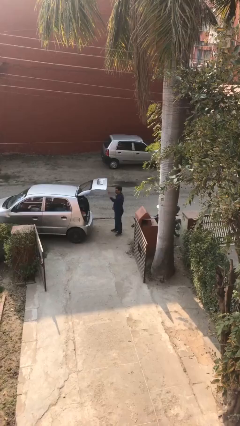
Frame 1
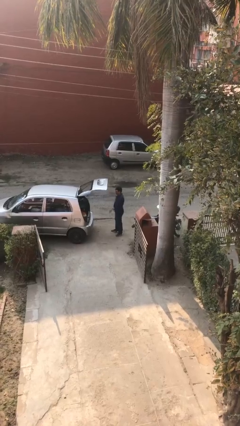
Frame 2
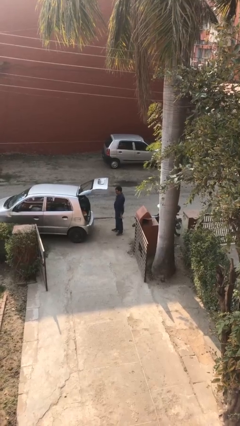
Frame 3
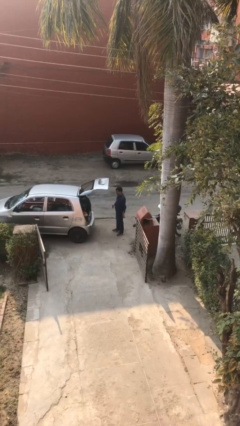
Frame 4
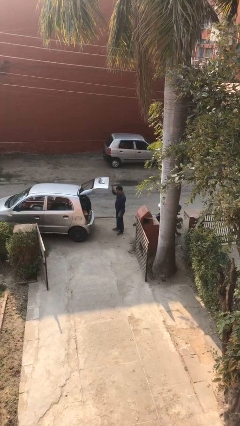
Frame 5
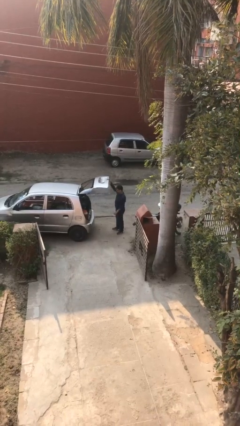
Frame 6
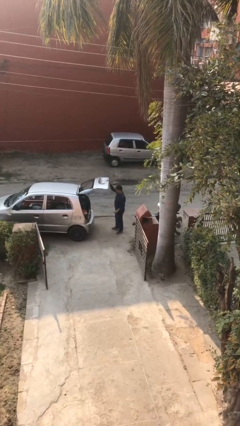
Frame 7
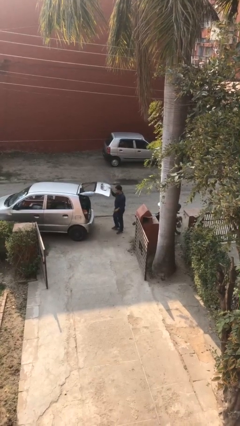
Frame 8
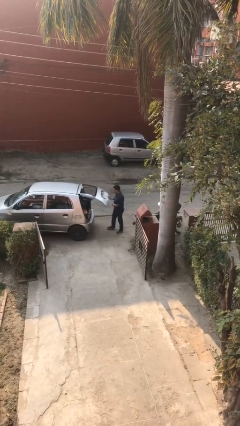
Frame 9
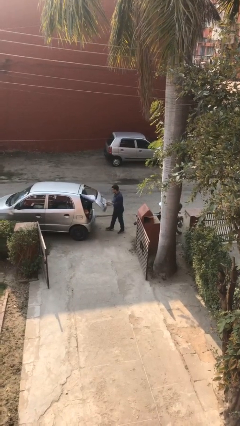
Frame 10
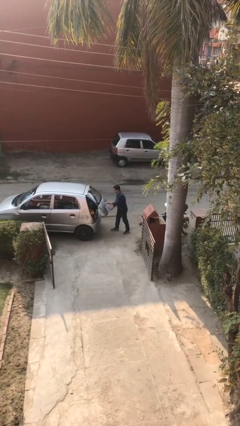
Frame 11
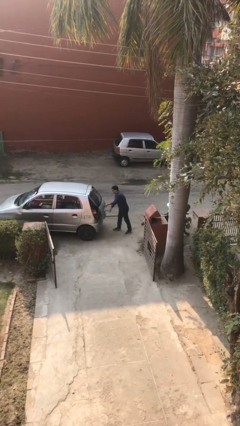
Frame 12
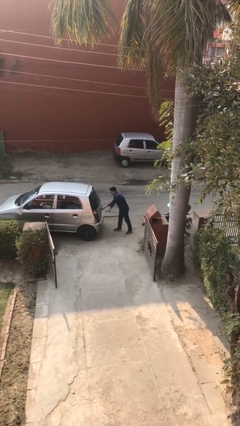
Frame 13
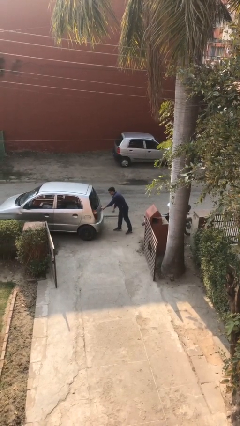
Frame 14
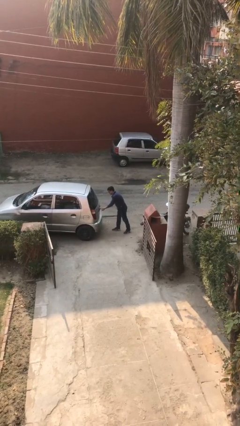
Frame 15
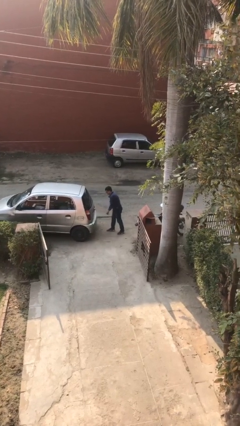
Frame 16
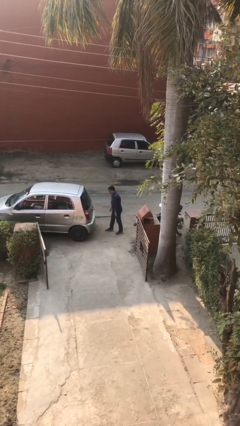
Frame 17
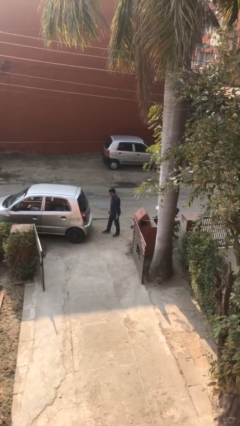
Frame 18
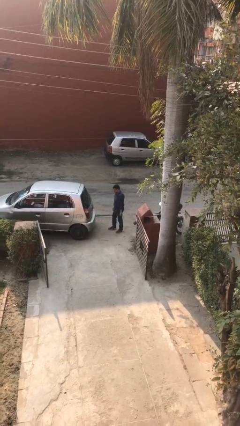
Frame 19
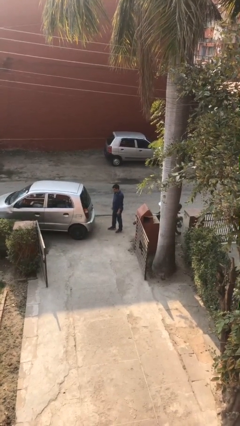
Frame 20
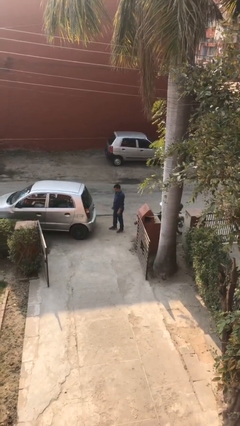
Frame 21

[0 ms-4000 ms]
person closes car trunk

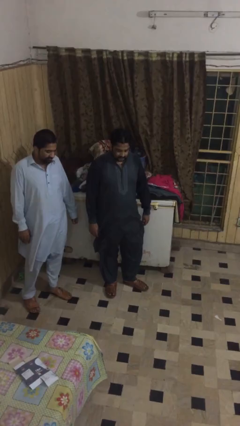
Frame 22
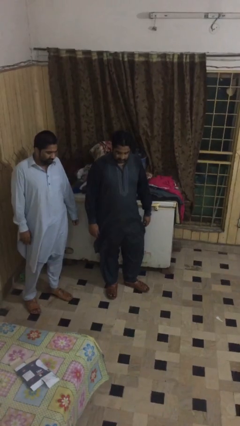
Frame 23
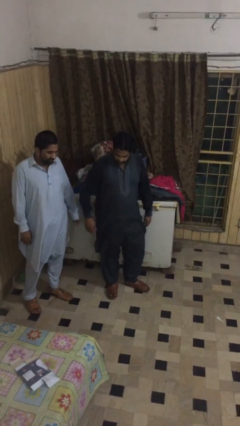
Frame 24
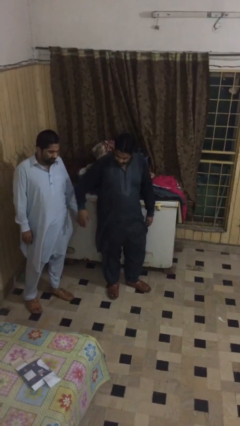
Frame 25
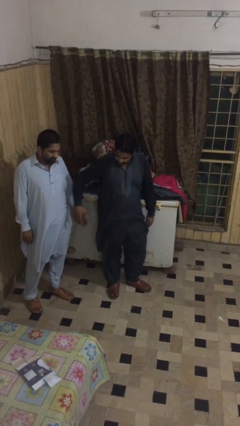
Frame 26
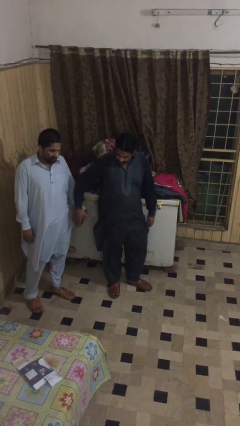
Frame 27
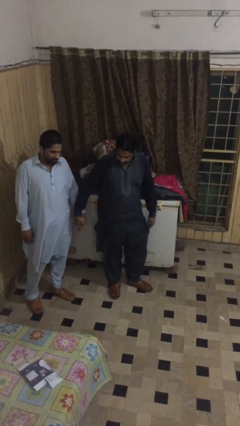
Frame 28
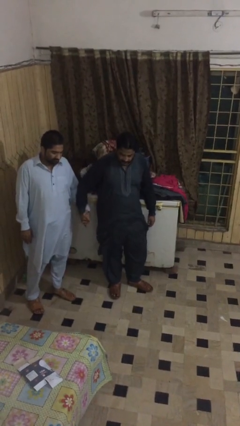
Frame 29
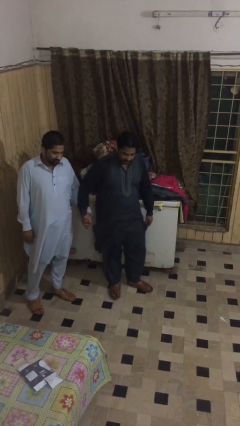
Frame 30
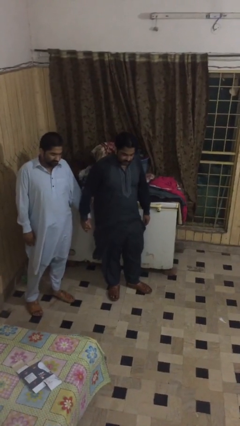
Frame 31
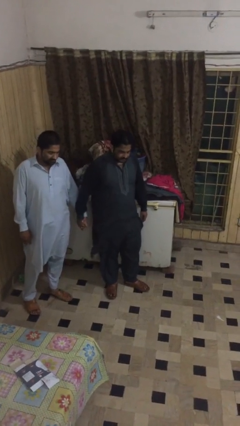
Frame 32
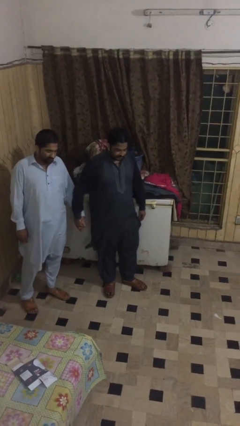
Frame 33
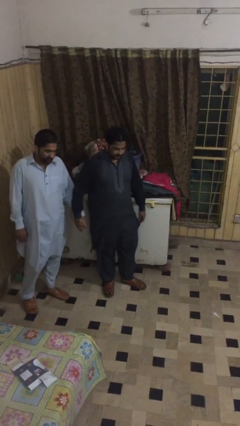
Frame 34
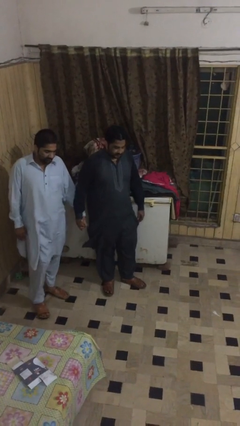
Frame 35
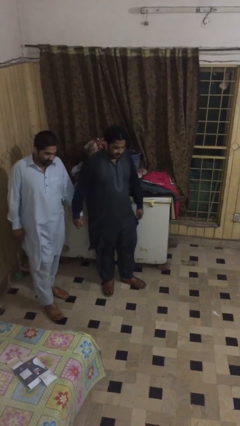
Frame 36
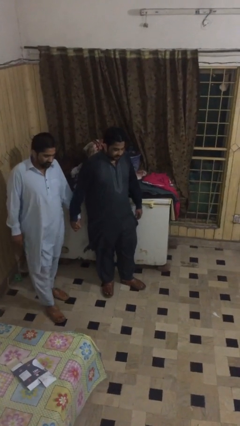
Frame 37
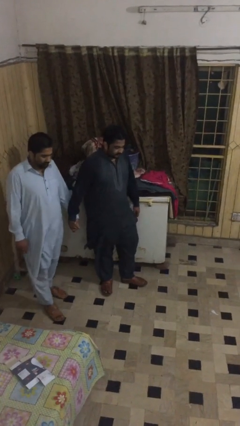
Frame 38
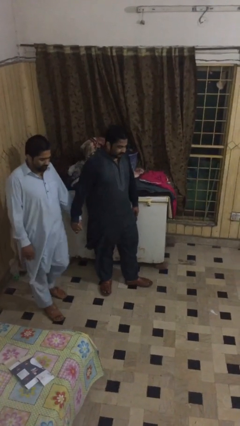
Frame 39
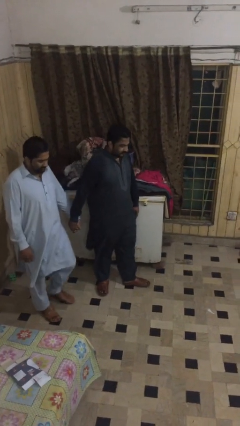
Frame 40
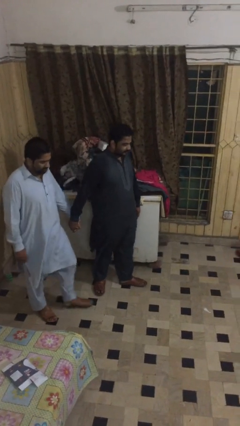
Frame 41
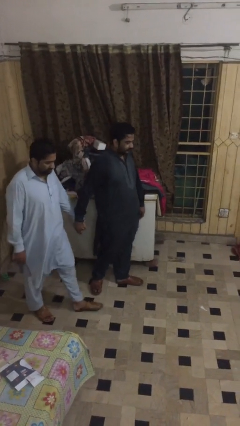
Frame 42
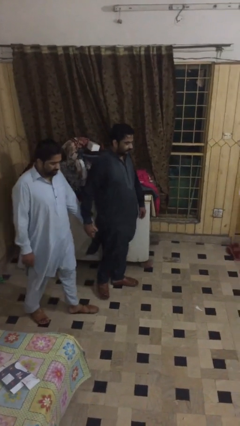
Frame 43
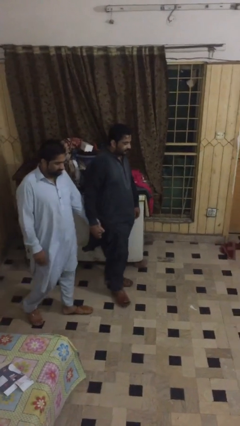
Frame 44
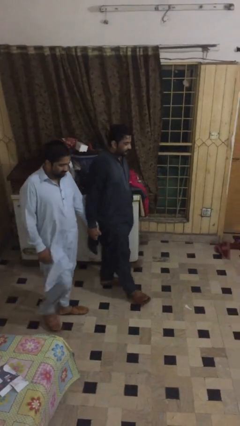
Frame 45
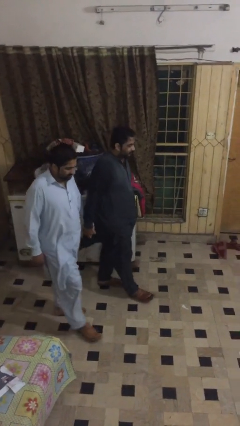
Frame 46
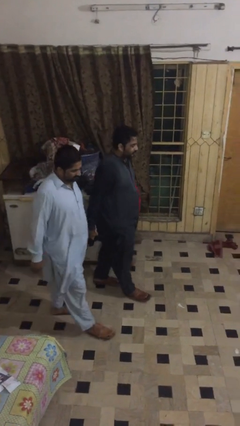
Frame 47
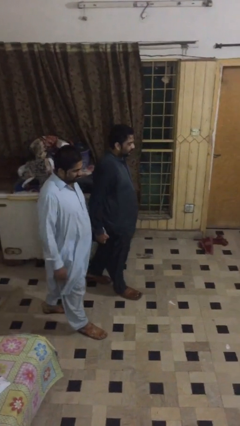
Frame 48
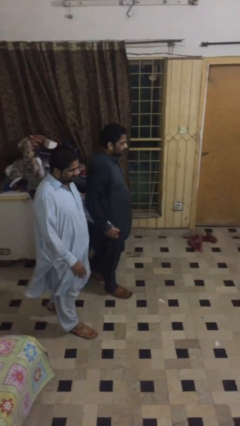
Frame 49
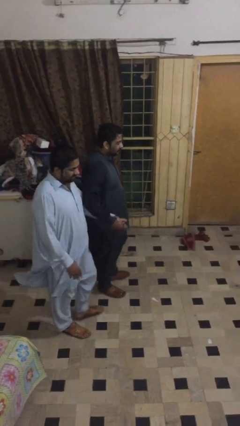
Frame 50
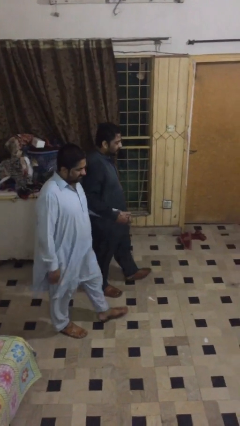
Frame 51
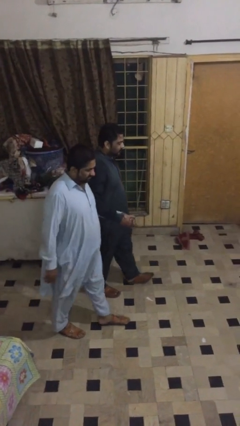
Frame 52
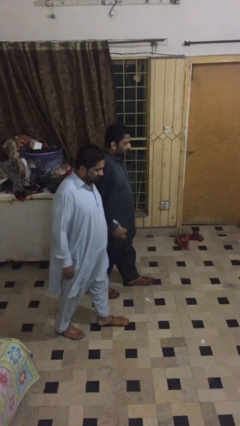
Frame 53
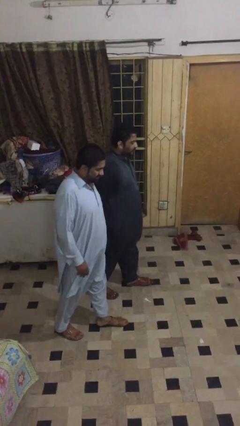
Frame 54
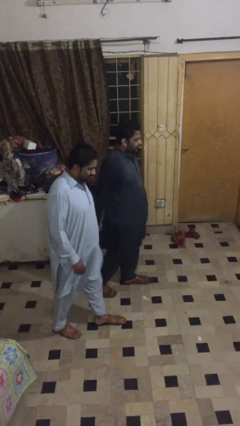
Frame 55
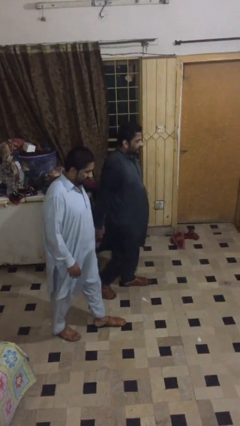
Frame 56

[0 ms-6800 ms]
person holds hand

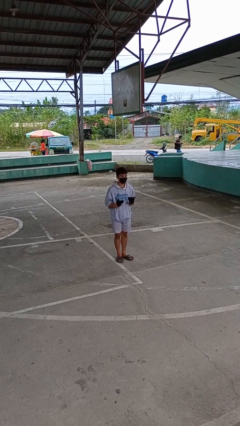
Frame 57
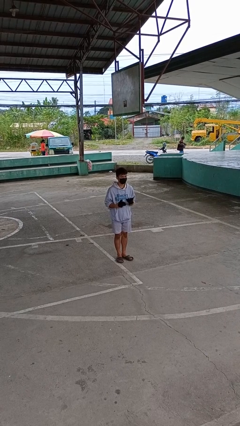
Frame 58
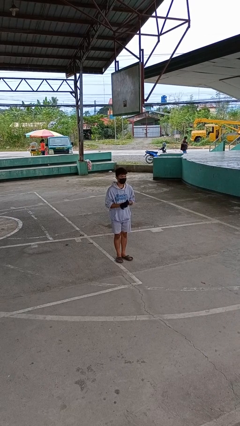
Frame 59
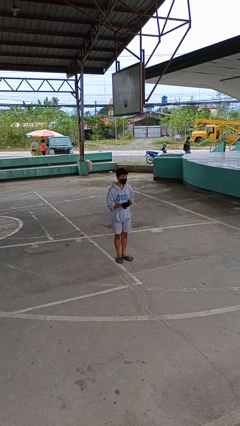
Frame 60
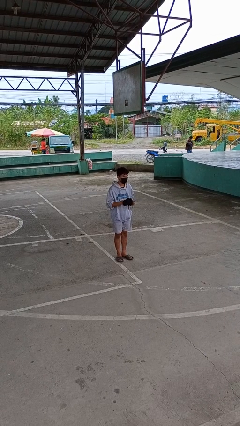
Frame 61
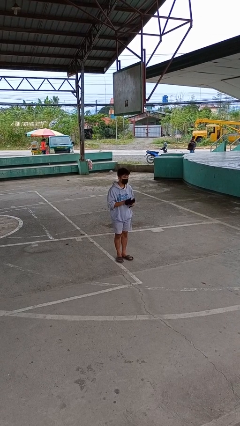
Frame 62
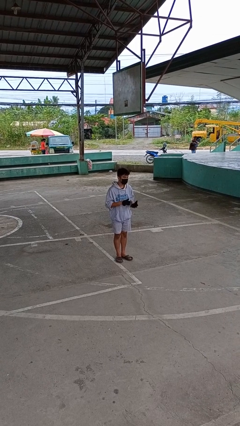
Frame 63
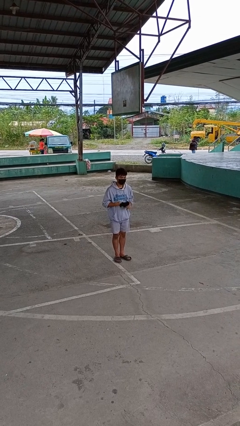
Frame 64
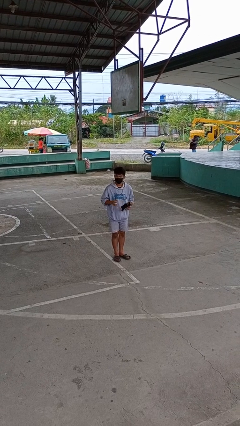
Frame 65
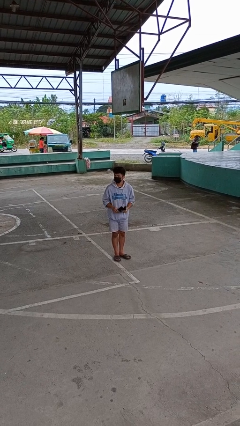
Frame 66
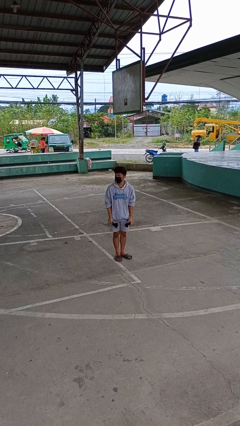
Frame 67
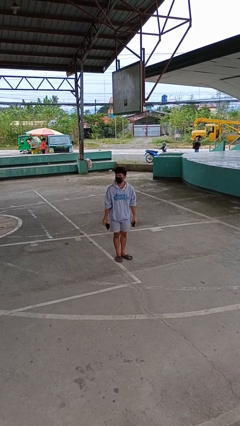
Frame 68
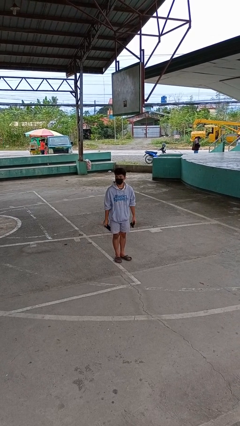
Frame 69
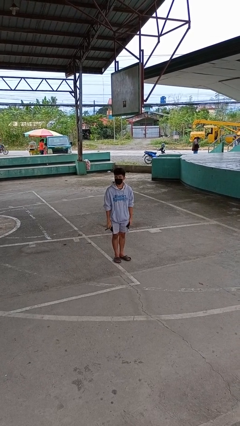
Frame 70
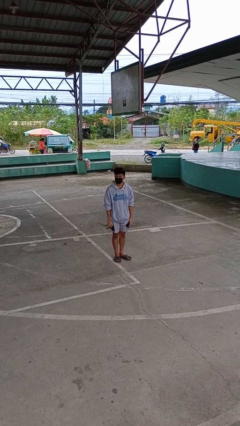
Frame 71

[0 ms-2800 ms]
person takes off gloves

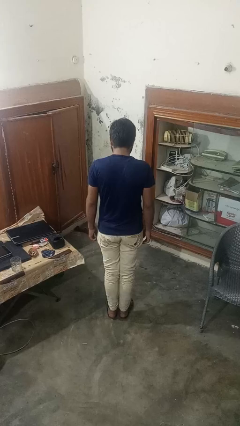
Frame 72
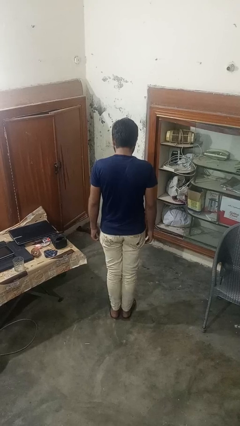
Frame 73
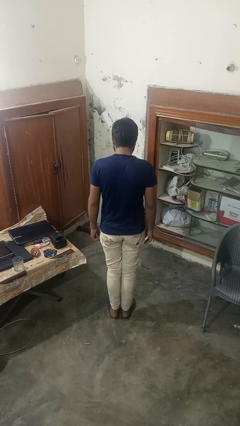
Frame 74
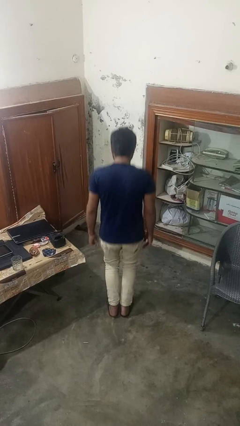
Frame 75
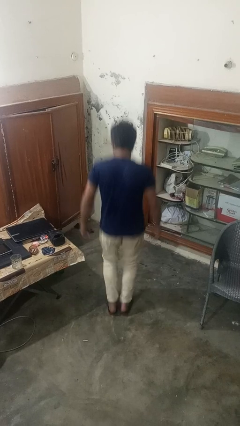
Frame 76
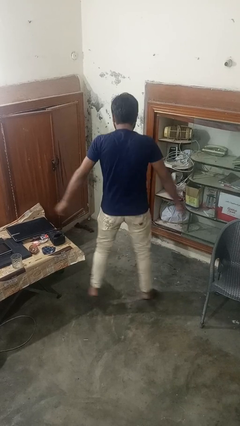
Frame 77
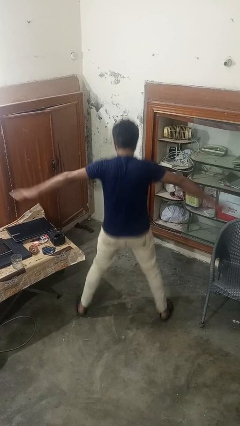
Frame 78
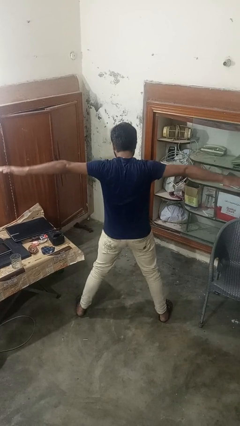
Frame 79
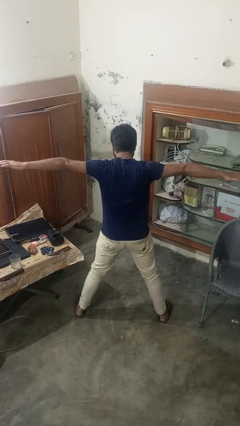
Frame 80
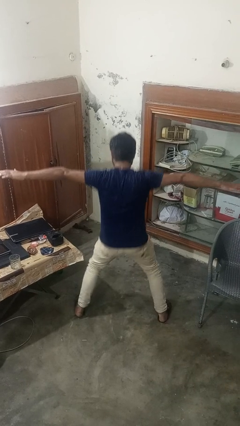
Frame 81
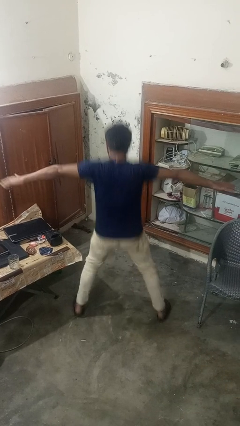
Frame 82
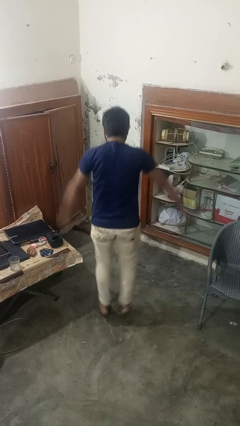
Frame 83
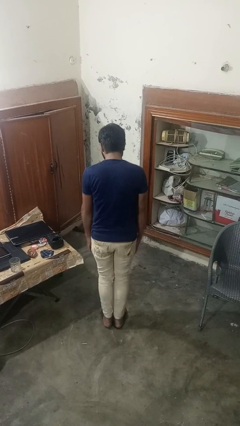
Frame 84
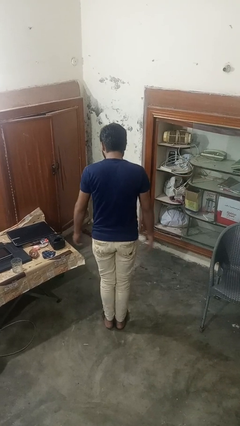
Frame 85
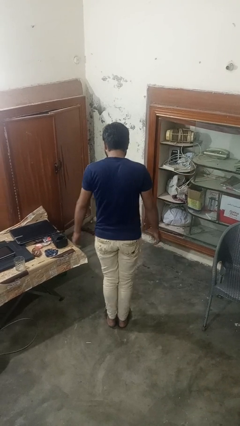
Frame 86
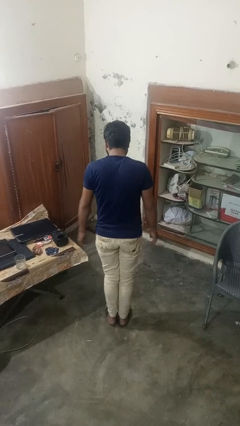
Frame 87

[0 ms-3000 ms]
person exercises with jumping jacks

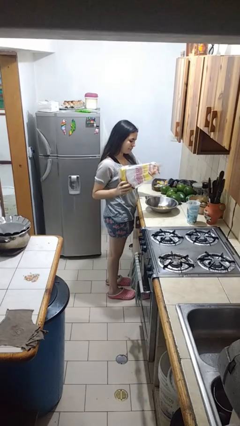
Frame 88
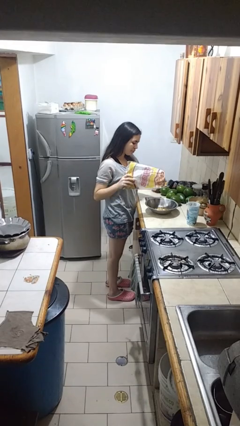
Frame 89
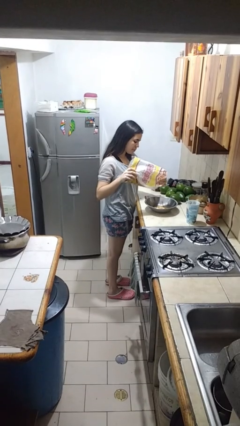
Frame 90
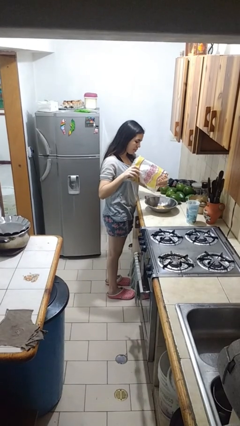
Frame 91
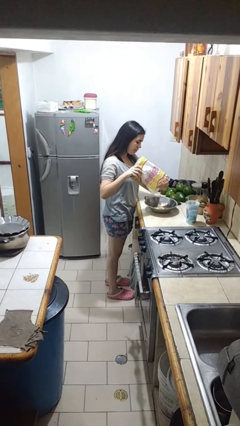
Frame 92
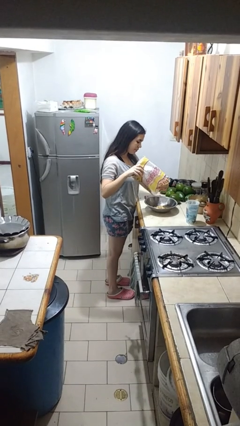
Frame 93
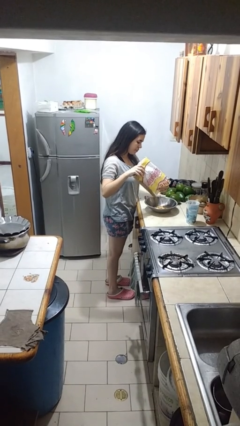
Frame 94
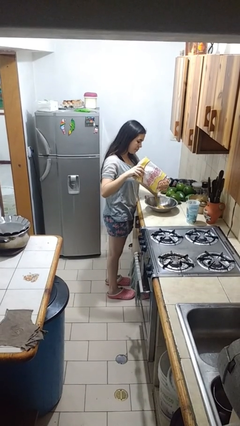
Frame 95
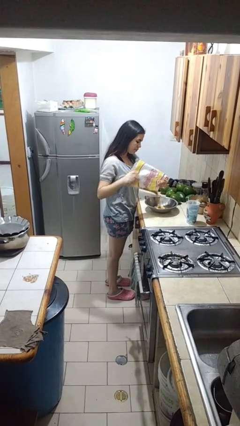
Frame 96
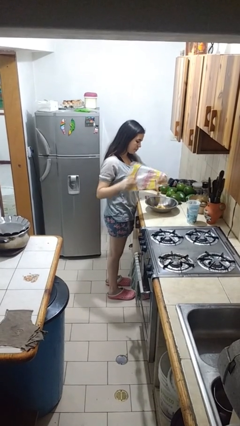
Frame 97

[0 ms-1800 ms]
person pours into bowl
